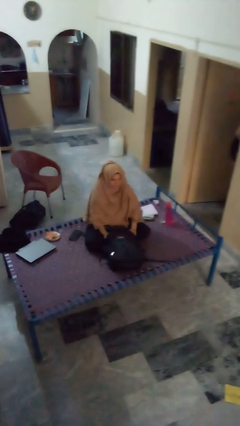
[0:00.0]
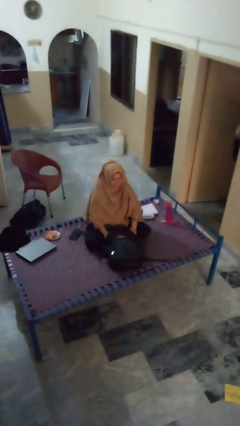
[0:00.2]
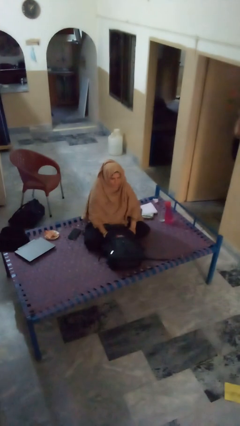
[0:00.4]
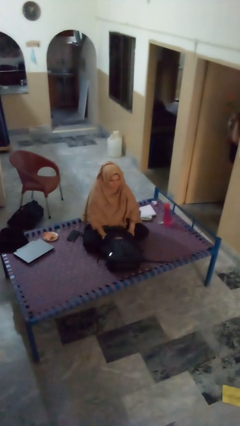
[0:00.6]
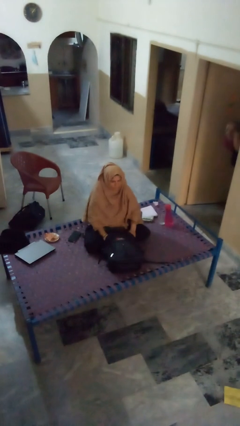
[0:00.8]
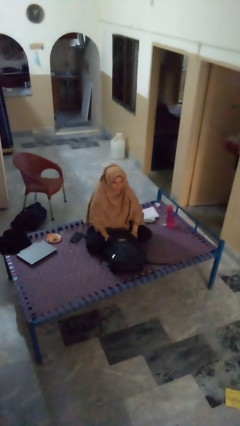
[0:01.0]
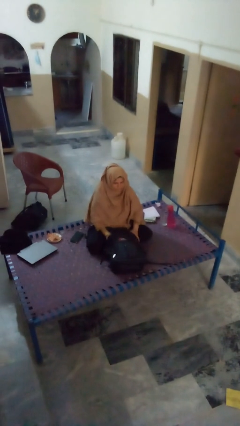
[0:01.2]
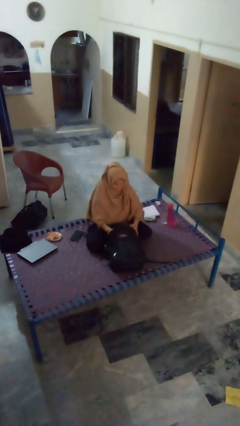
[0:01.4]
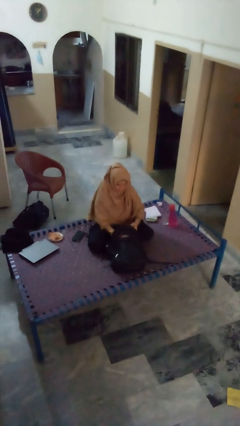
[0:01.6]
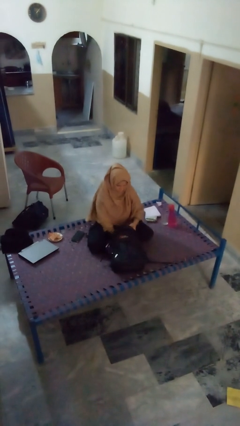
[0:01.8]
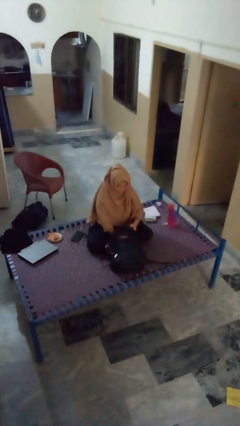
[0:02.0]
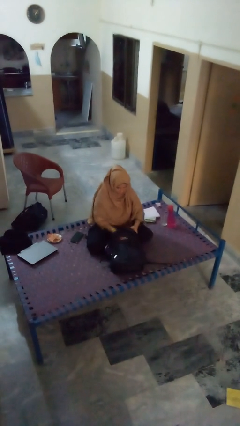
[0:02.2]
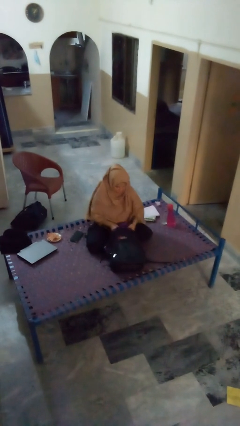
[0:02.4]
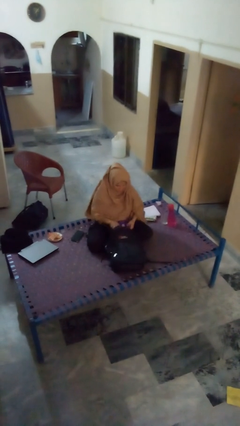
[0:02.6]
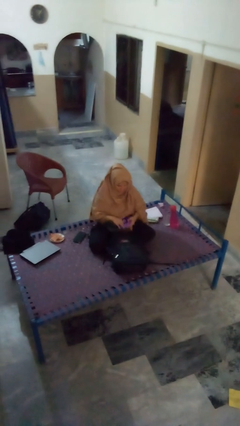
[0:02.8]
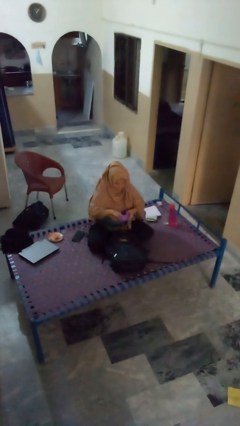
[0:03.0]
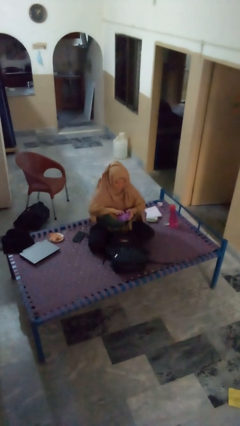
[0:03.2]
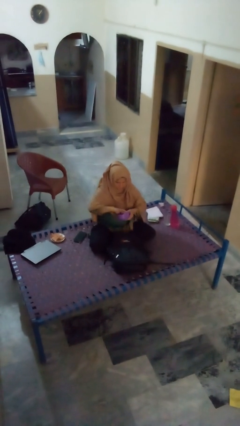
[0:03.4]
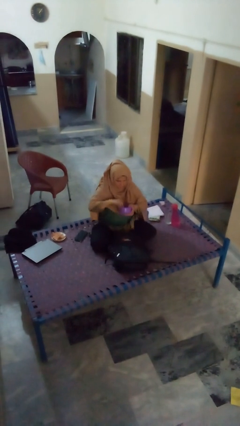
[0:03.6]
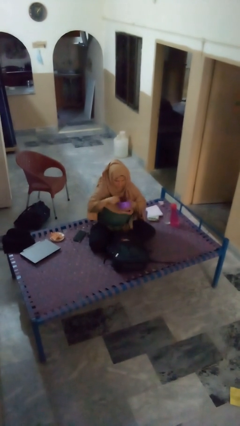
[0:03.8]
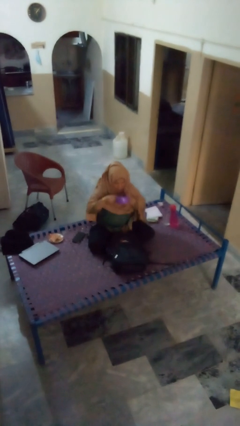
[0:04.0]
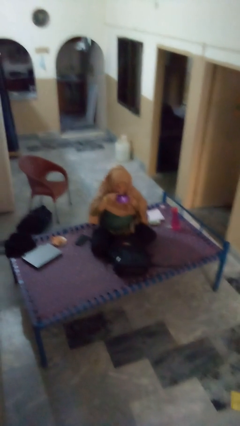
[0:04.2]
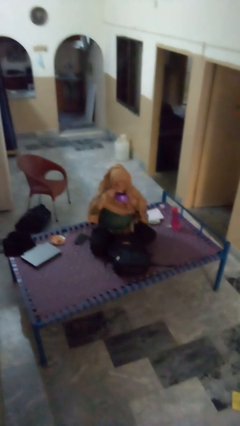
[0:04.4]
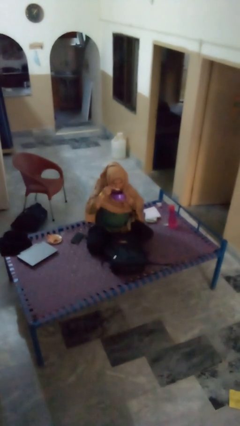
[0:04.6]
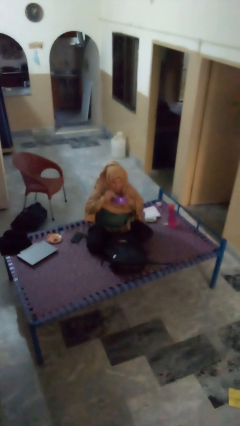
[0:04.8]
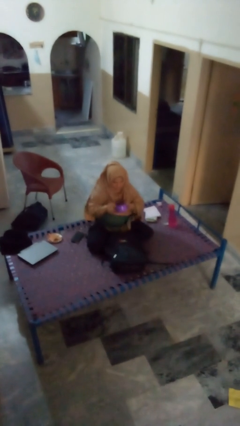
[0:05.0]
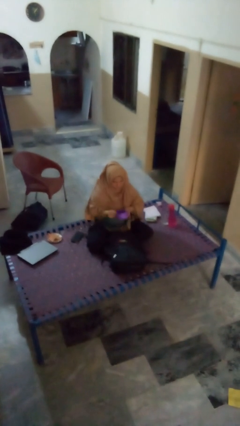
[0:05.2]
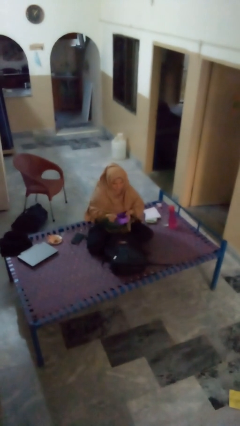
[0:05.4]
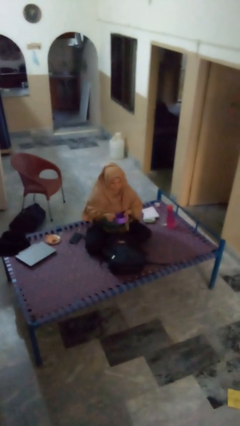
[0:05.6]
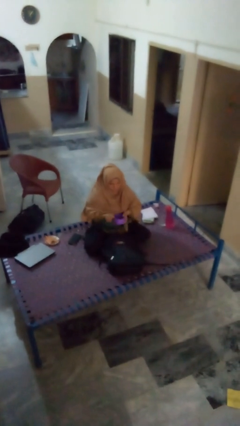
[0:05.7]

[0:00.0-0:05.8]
person eats snack from bag

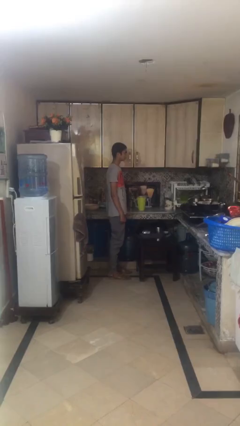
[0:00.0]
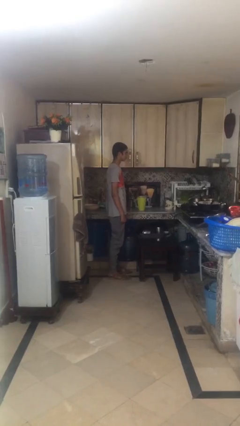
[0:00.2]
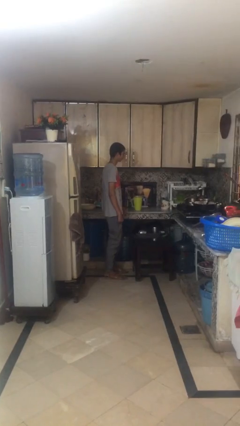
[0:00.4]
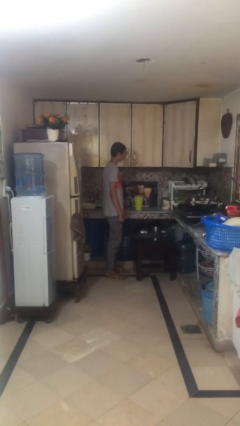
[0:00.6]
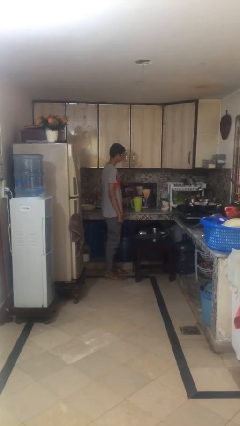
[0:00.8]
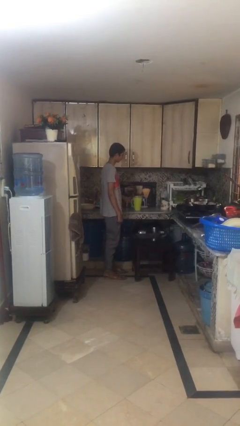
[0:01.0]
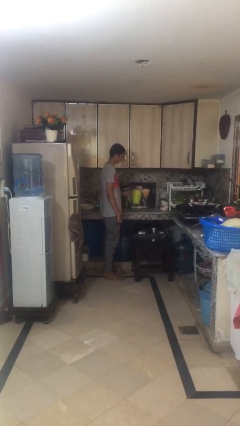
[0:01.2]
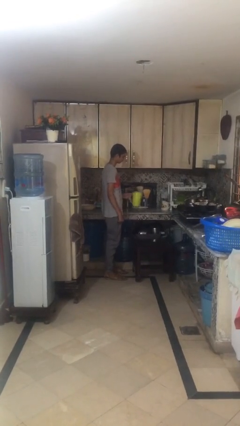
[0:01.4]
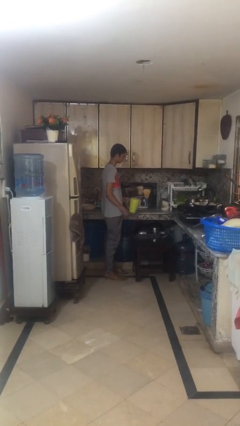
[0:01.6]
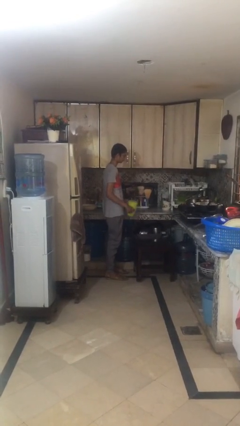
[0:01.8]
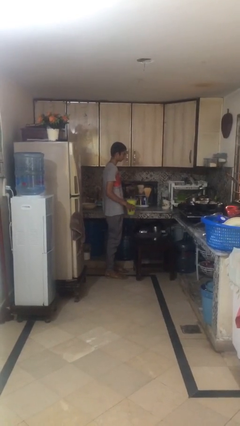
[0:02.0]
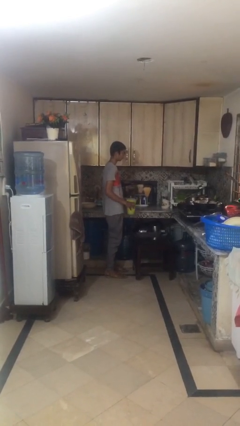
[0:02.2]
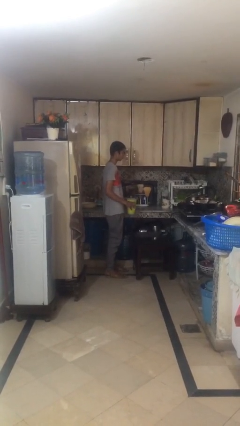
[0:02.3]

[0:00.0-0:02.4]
person picks up object from shelf

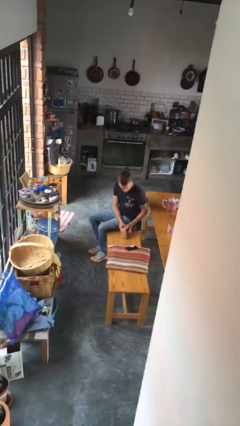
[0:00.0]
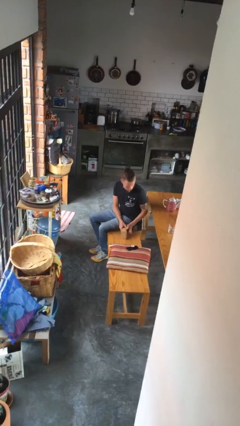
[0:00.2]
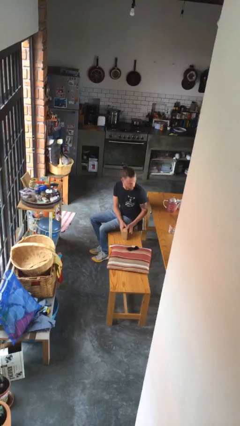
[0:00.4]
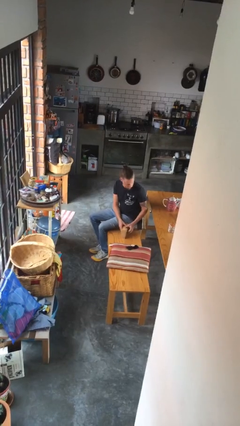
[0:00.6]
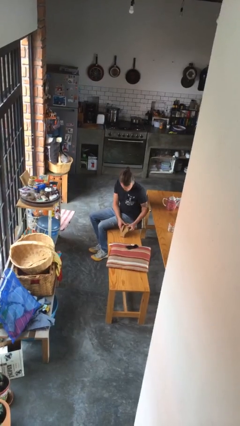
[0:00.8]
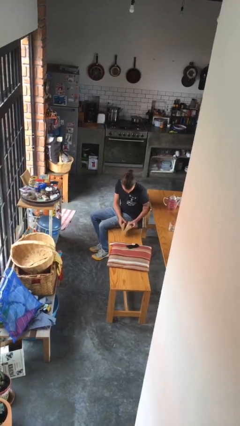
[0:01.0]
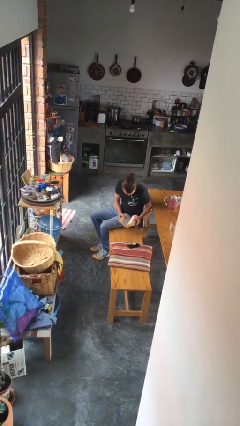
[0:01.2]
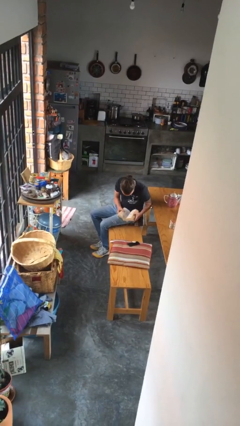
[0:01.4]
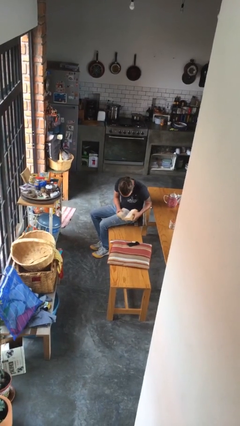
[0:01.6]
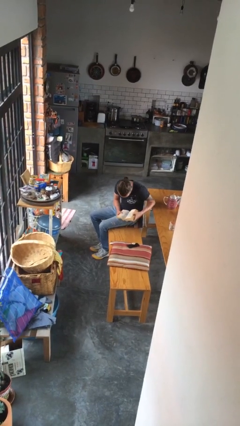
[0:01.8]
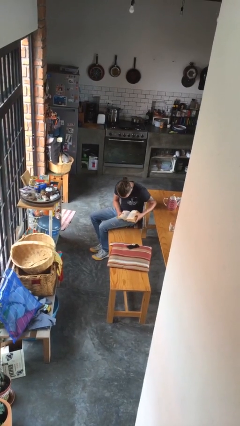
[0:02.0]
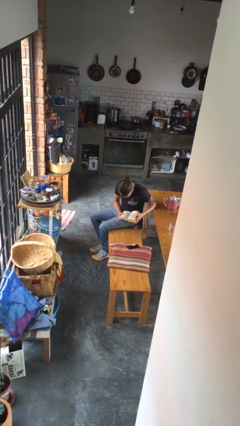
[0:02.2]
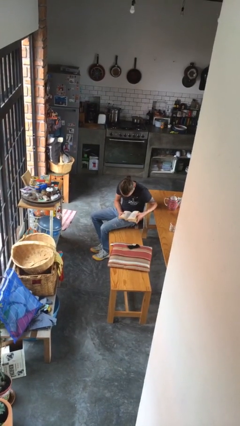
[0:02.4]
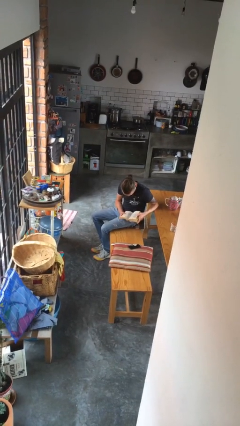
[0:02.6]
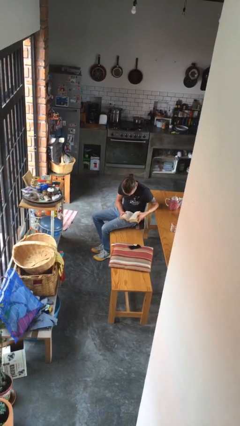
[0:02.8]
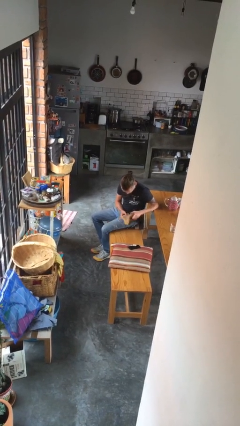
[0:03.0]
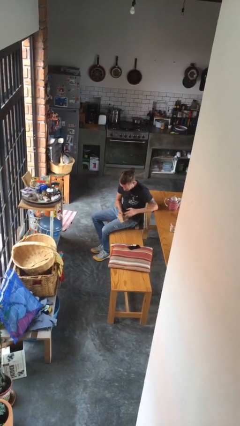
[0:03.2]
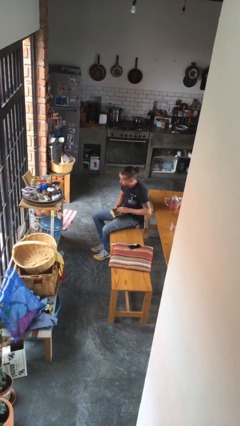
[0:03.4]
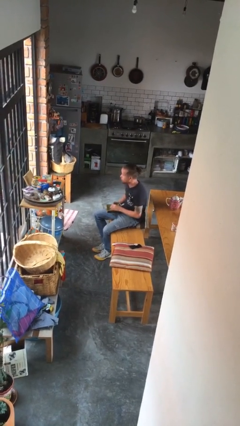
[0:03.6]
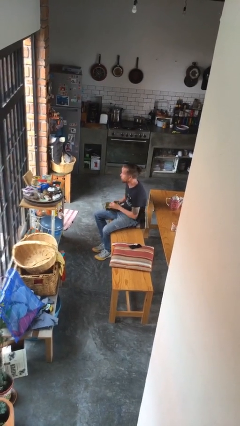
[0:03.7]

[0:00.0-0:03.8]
person reads book

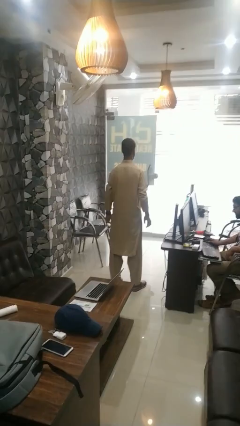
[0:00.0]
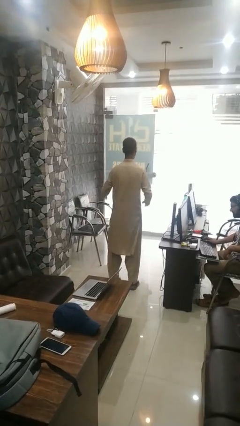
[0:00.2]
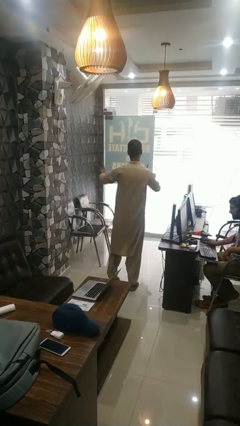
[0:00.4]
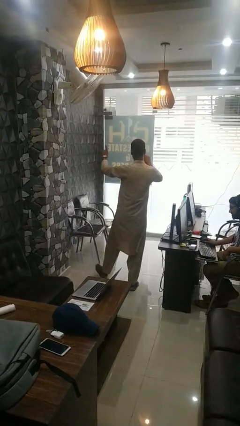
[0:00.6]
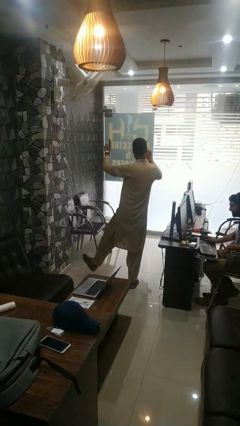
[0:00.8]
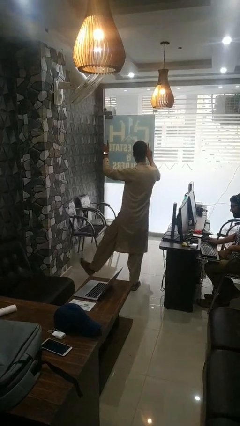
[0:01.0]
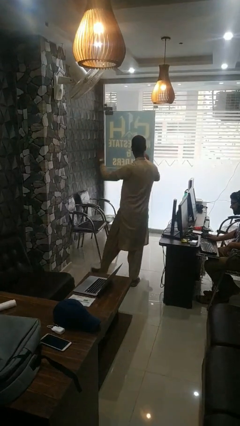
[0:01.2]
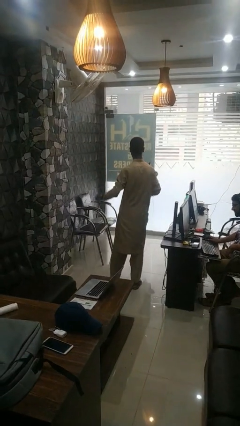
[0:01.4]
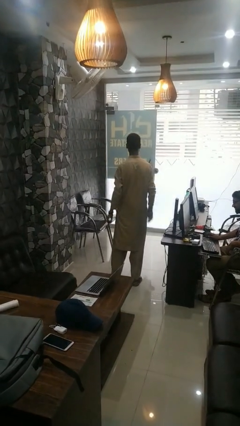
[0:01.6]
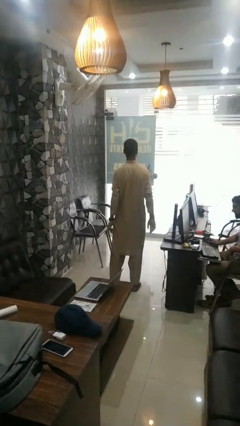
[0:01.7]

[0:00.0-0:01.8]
person dances in place

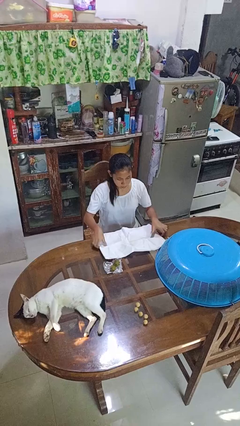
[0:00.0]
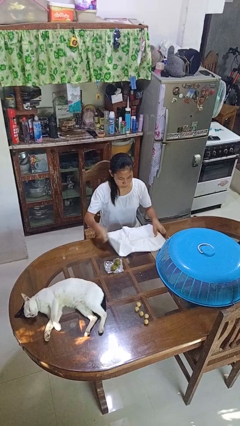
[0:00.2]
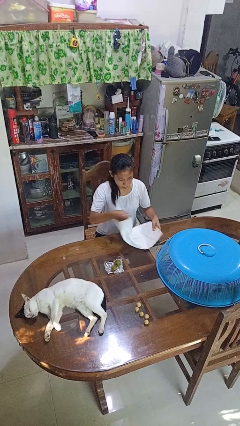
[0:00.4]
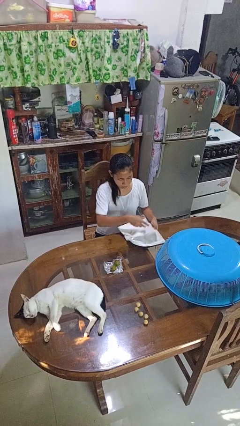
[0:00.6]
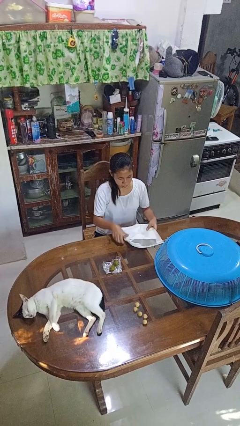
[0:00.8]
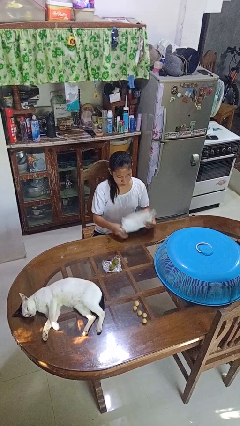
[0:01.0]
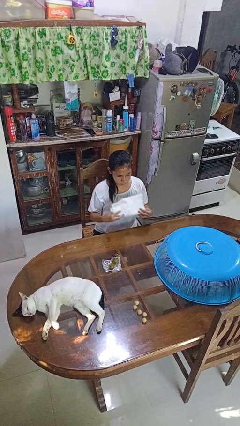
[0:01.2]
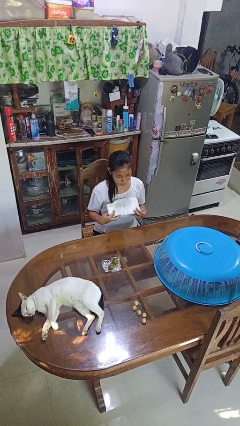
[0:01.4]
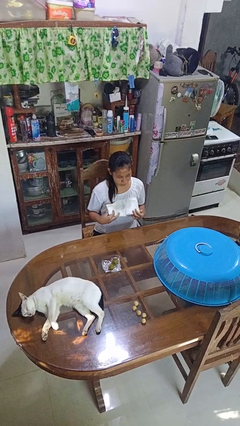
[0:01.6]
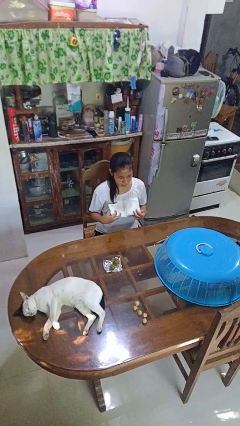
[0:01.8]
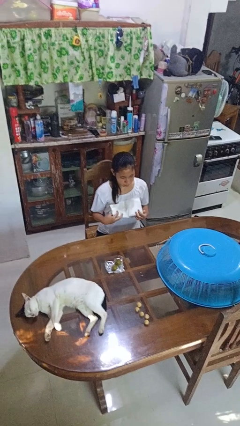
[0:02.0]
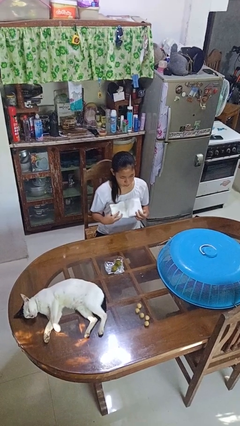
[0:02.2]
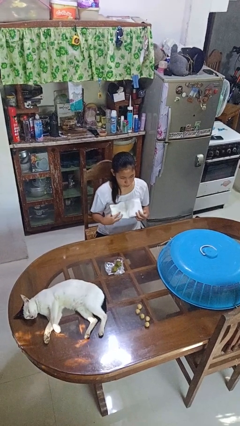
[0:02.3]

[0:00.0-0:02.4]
person folds tablecloth

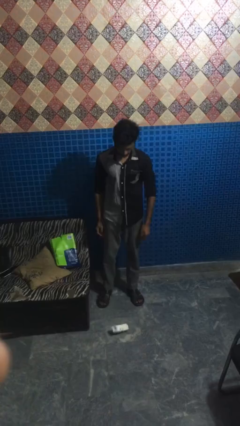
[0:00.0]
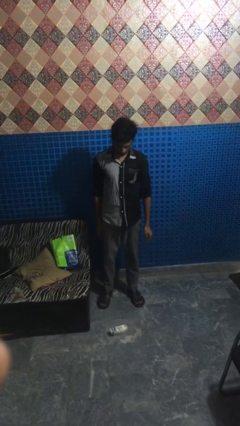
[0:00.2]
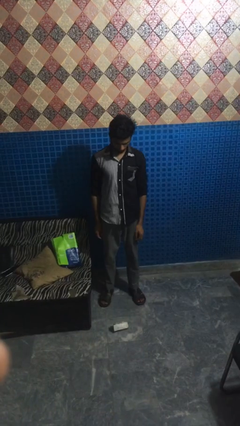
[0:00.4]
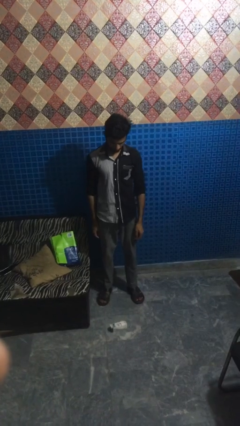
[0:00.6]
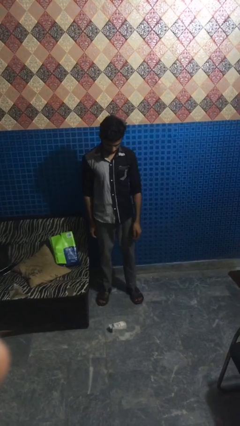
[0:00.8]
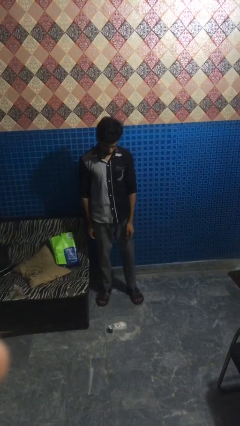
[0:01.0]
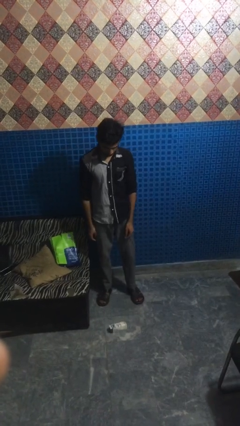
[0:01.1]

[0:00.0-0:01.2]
person catches dropped object

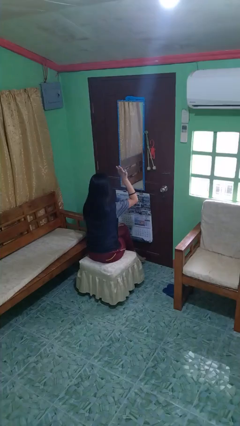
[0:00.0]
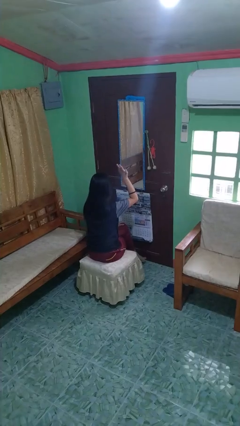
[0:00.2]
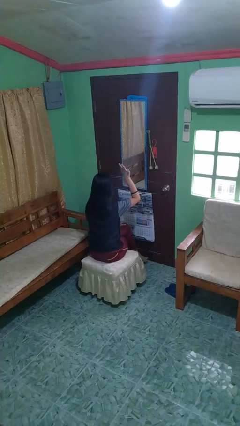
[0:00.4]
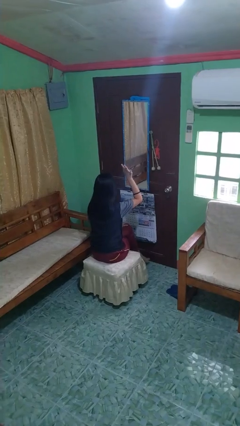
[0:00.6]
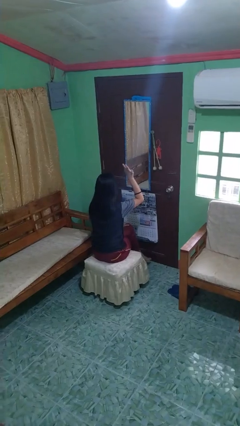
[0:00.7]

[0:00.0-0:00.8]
person gestures lower hand
